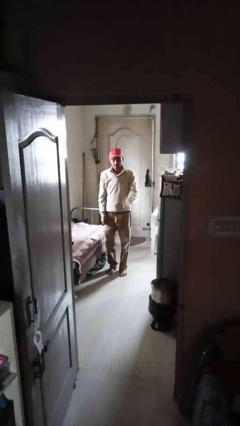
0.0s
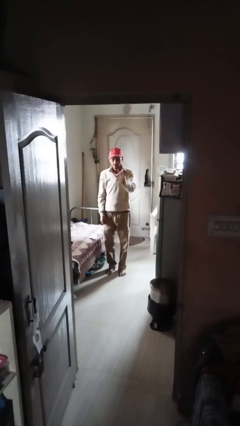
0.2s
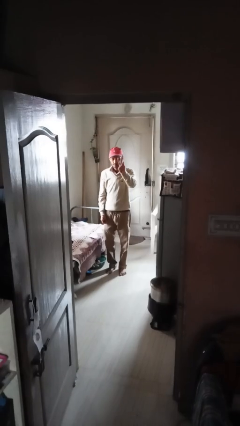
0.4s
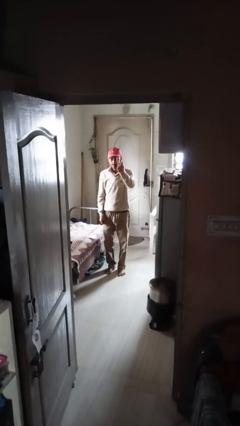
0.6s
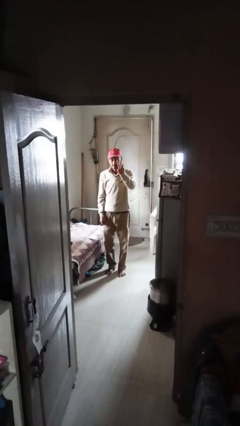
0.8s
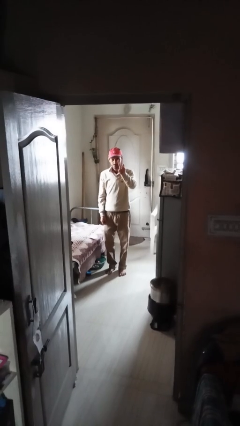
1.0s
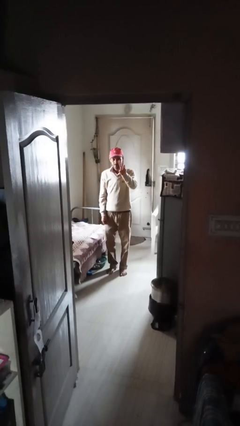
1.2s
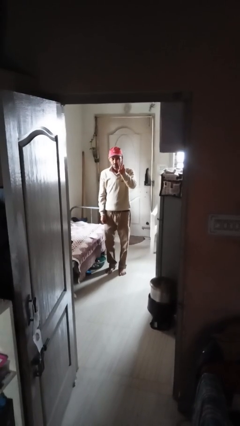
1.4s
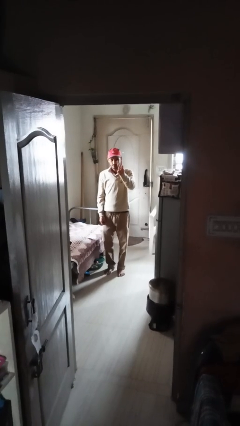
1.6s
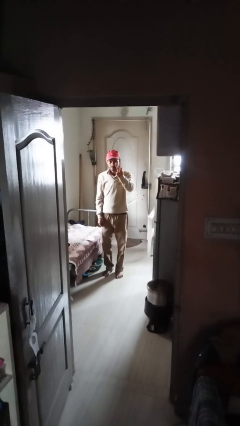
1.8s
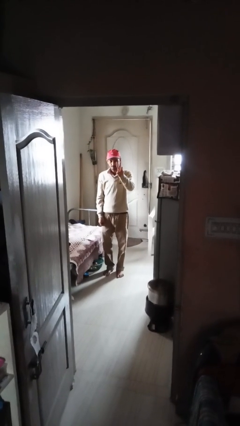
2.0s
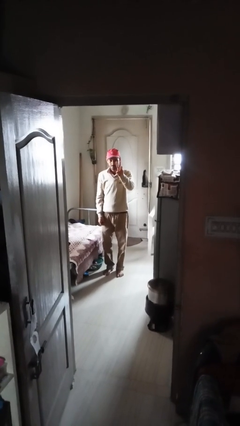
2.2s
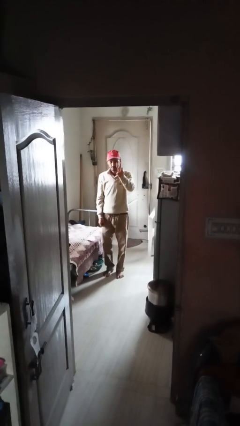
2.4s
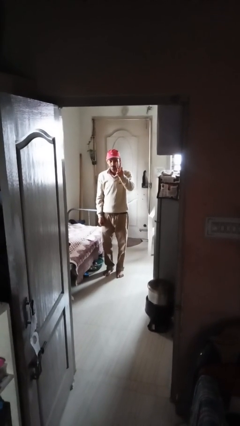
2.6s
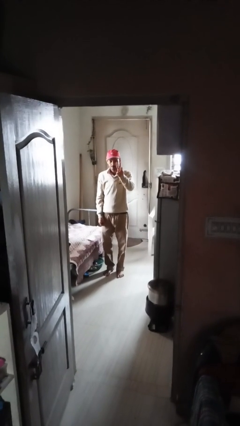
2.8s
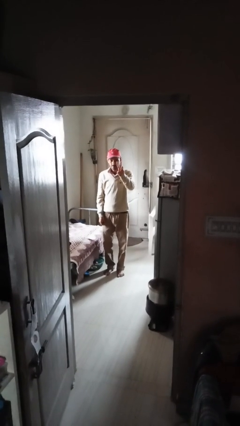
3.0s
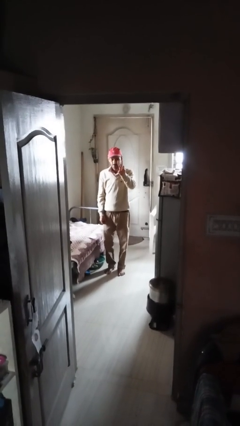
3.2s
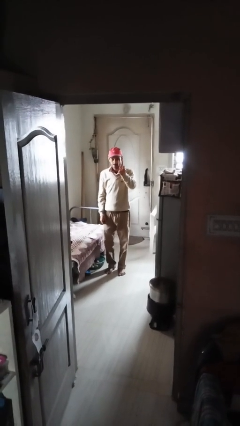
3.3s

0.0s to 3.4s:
person gestures peace

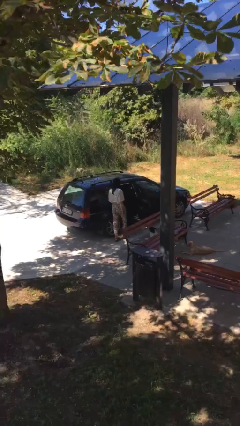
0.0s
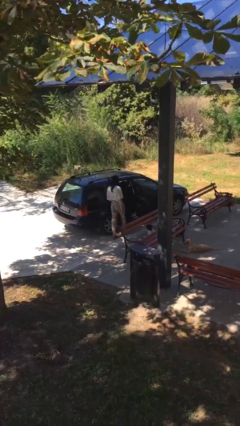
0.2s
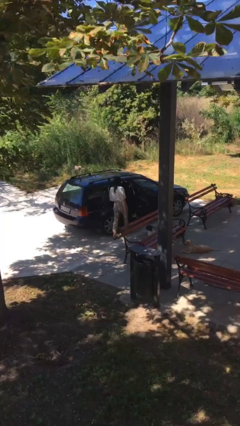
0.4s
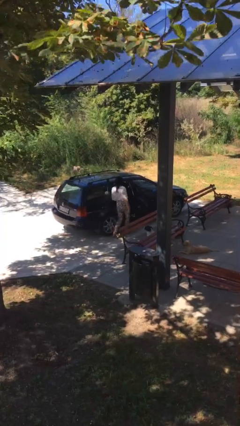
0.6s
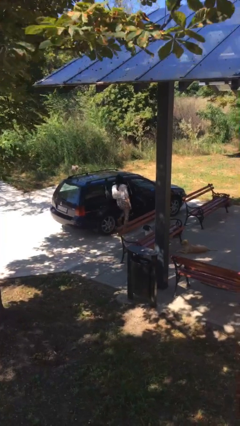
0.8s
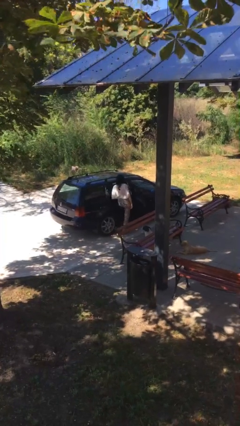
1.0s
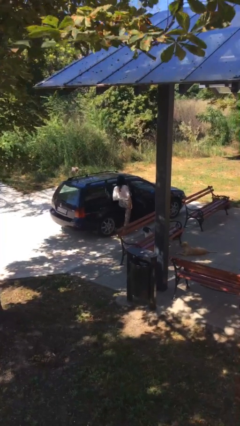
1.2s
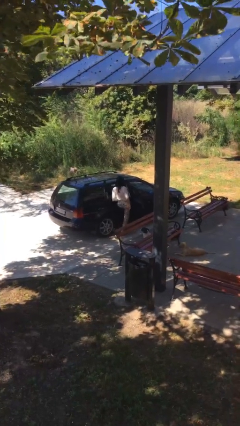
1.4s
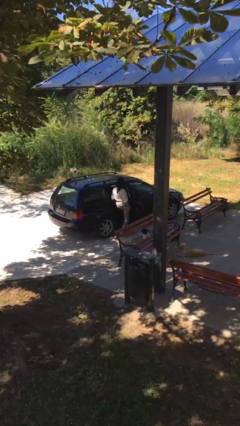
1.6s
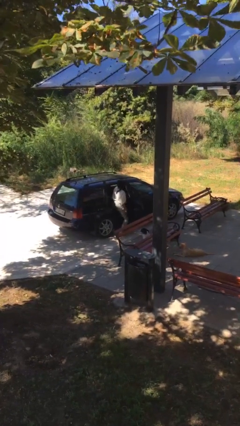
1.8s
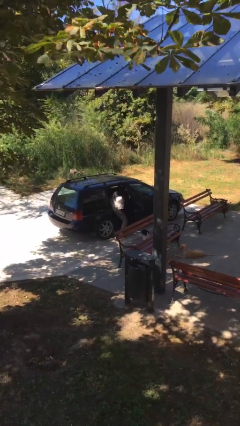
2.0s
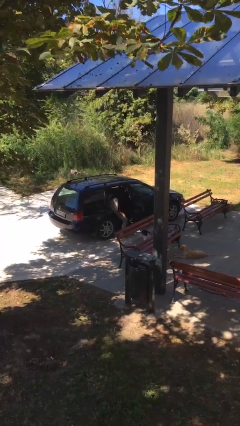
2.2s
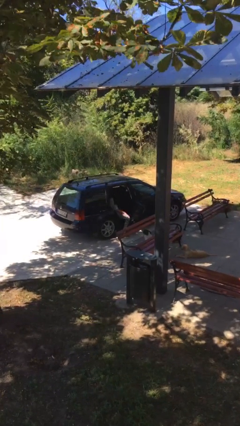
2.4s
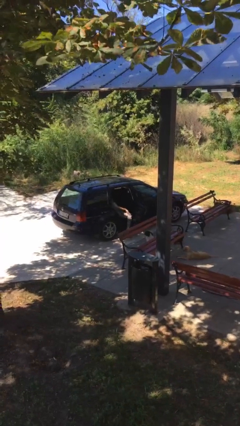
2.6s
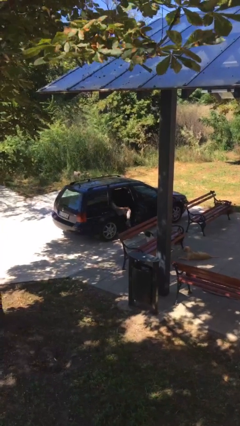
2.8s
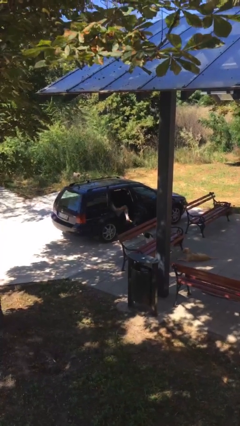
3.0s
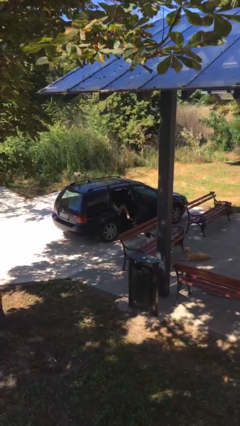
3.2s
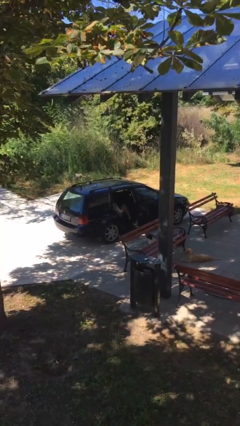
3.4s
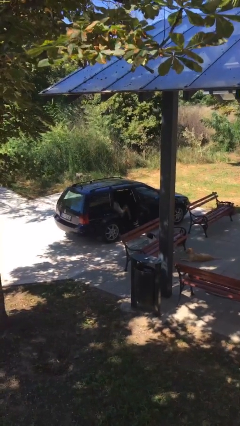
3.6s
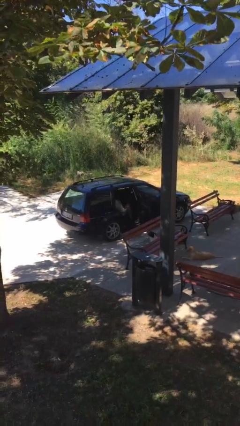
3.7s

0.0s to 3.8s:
person enters car

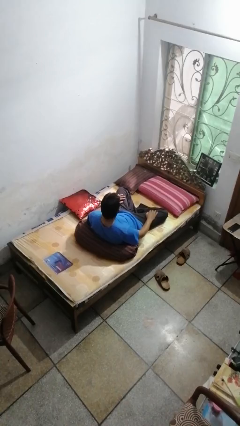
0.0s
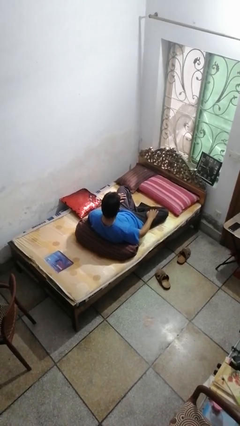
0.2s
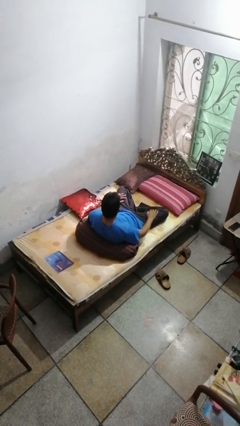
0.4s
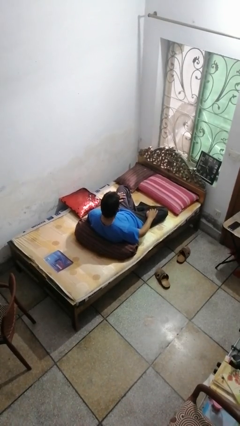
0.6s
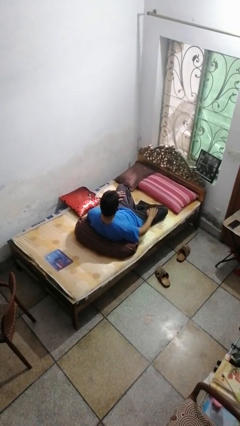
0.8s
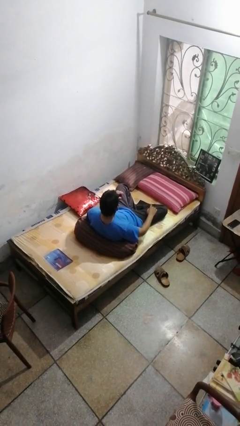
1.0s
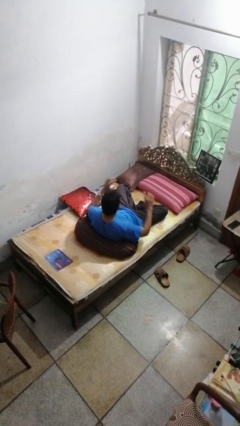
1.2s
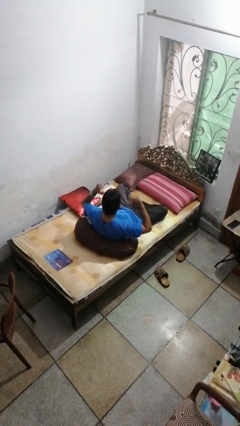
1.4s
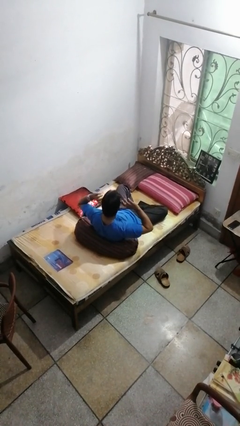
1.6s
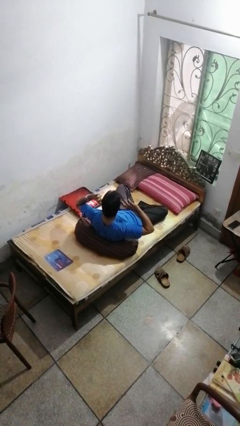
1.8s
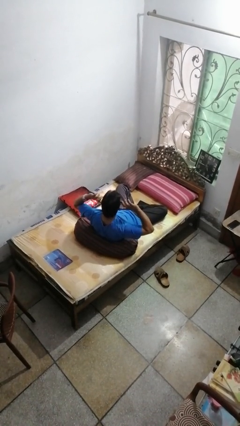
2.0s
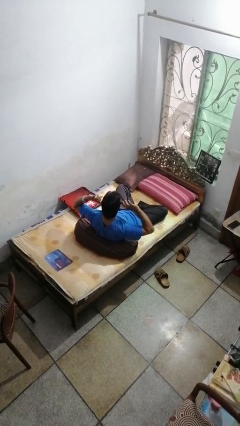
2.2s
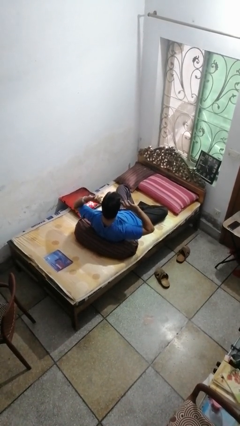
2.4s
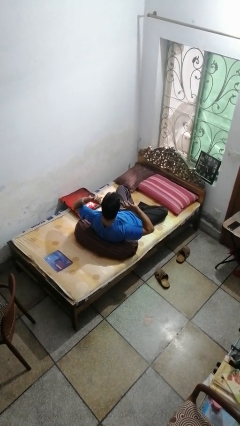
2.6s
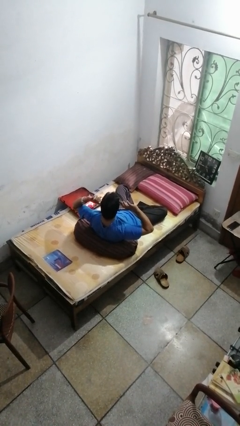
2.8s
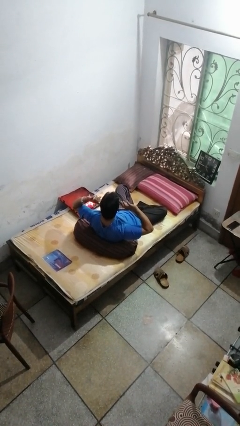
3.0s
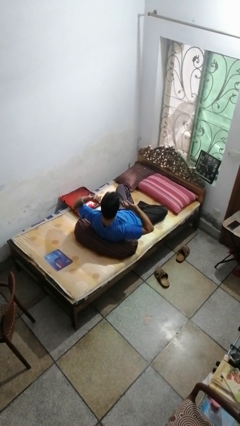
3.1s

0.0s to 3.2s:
person puts fingers in ear

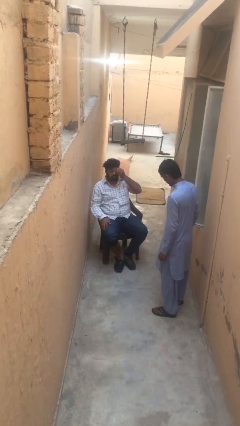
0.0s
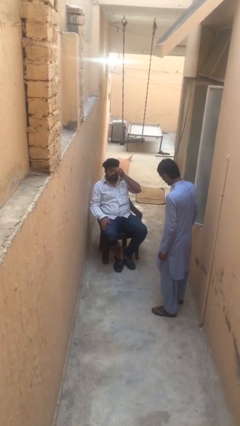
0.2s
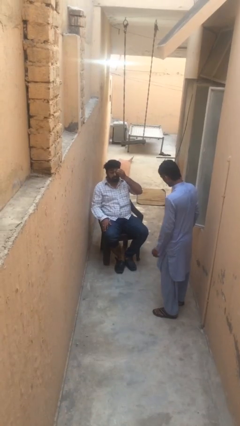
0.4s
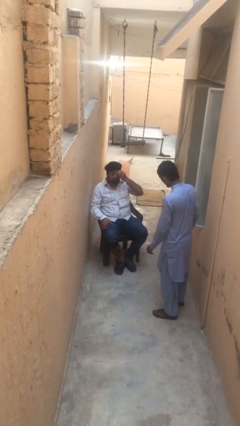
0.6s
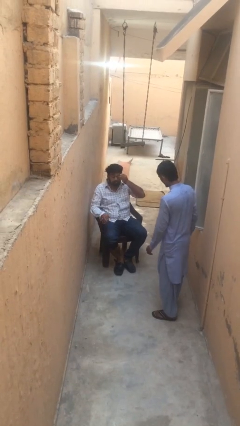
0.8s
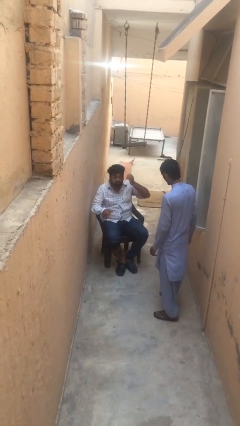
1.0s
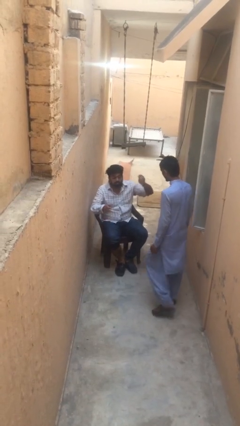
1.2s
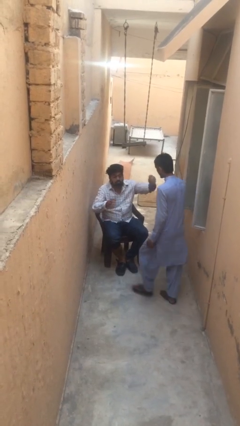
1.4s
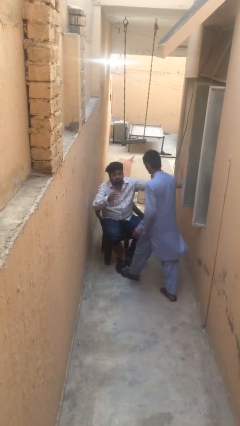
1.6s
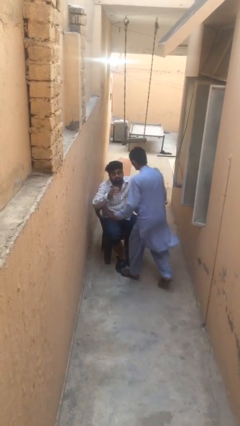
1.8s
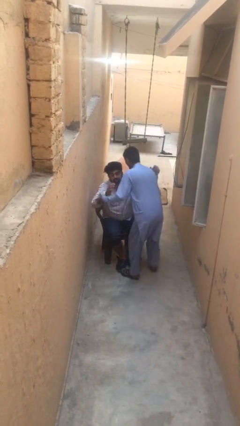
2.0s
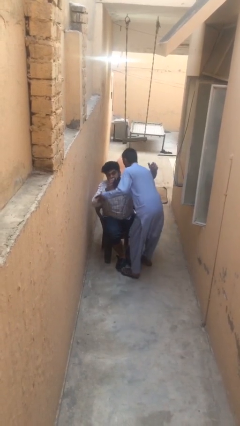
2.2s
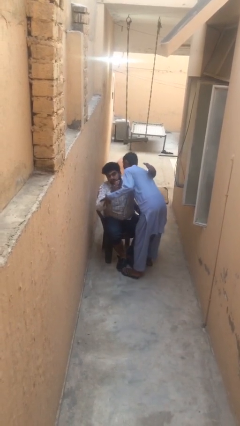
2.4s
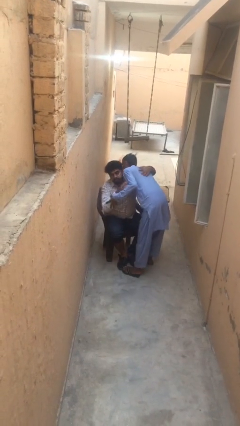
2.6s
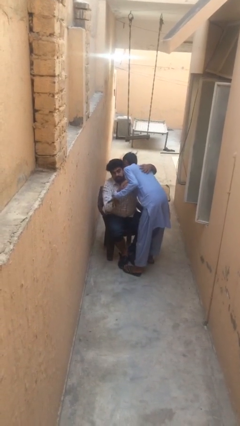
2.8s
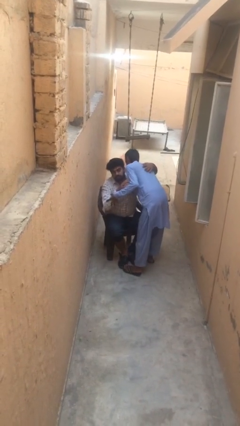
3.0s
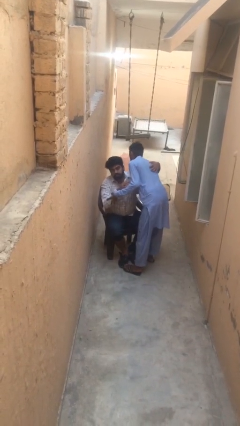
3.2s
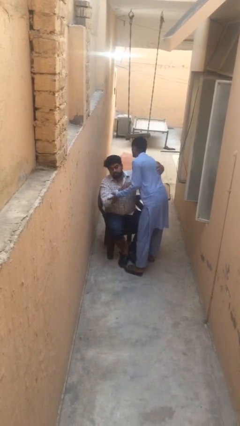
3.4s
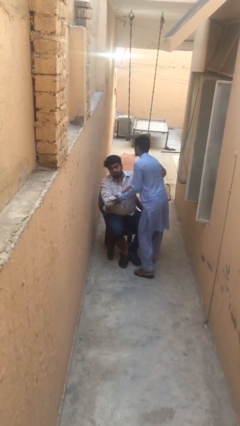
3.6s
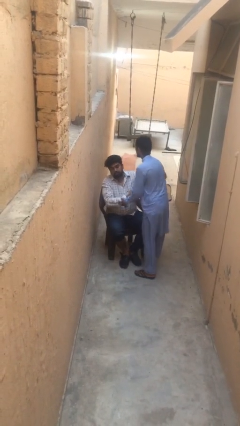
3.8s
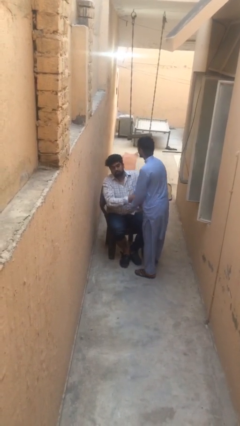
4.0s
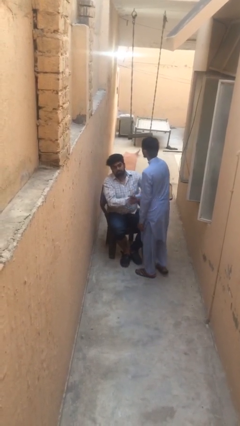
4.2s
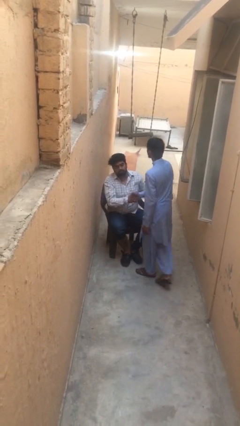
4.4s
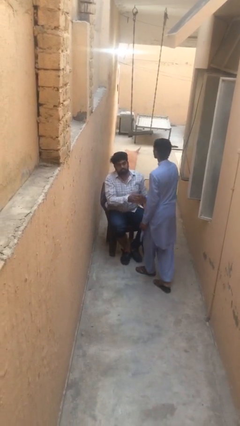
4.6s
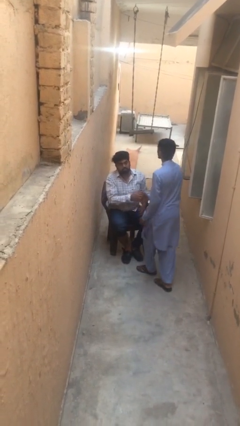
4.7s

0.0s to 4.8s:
person embraces person

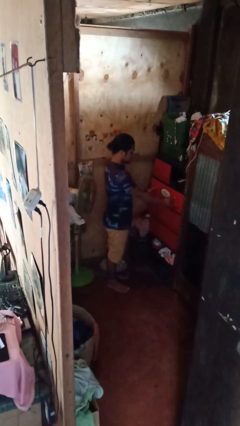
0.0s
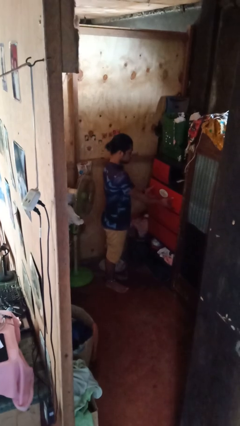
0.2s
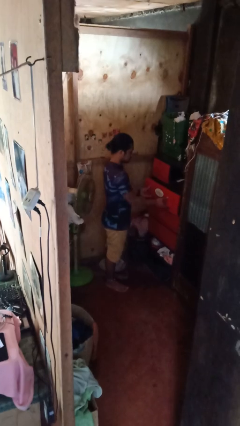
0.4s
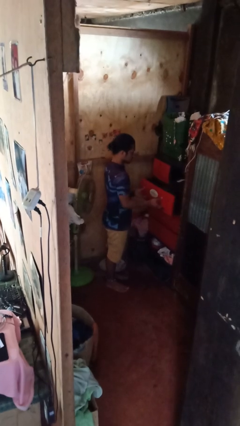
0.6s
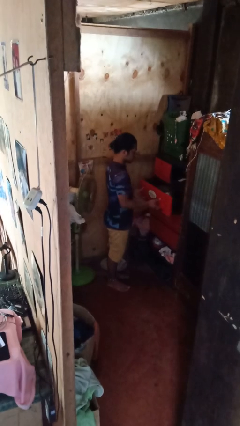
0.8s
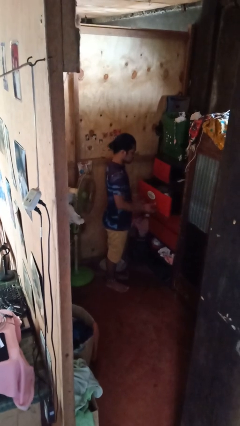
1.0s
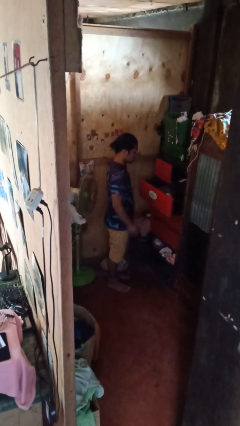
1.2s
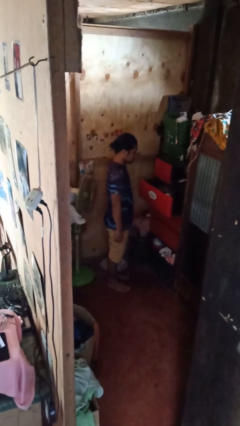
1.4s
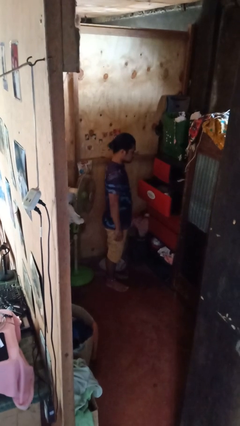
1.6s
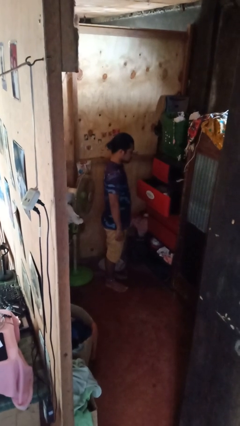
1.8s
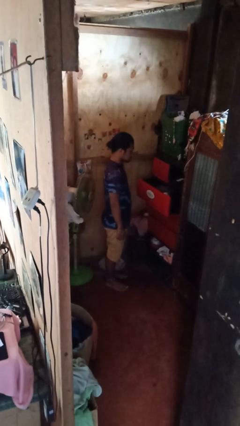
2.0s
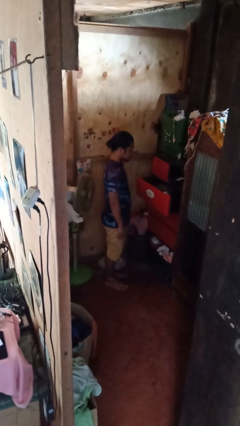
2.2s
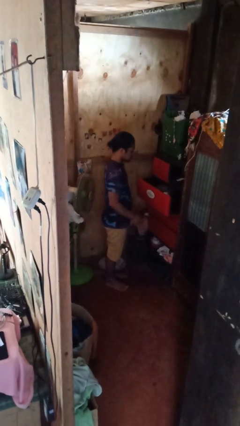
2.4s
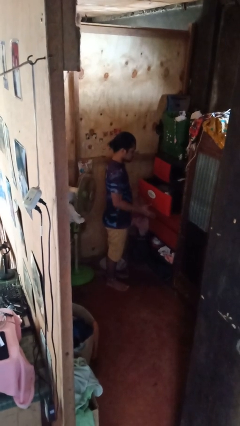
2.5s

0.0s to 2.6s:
person opens dresser drawer
